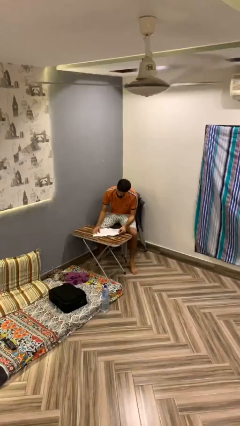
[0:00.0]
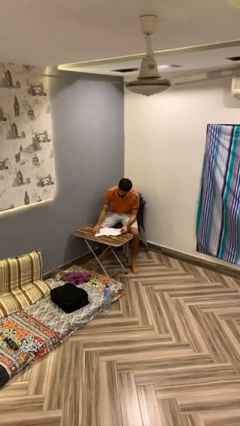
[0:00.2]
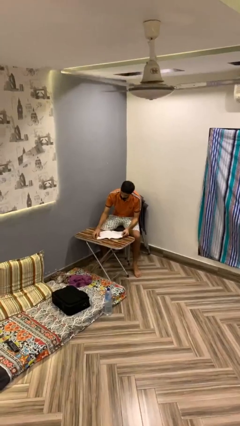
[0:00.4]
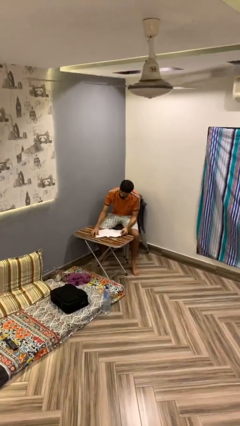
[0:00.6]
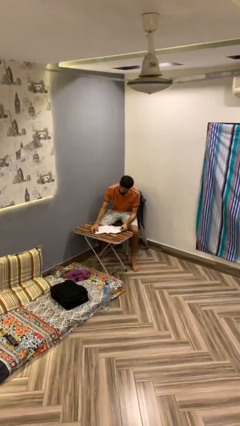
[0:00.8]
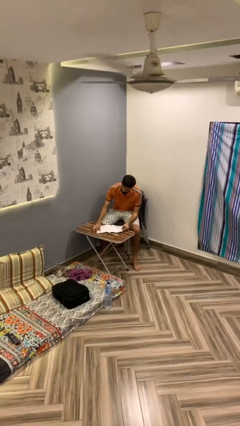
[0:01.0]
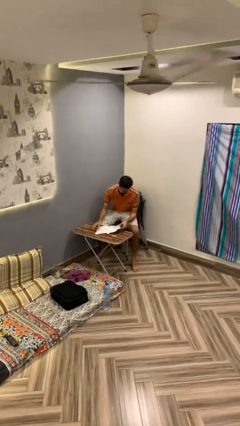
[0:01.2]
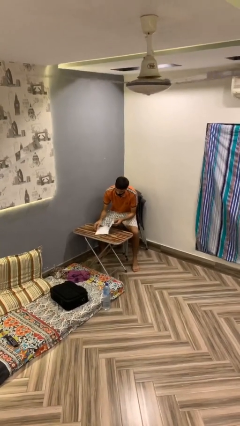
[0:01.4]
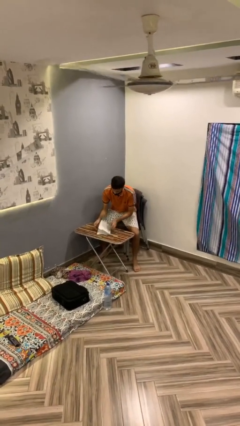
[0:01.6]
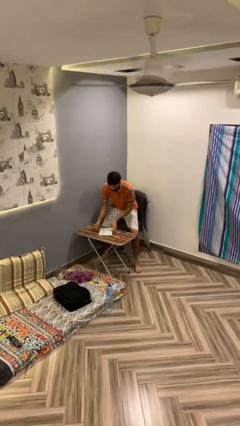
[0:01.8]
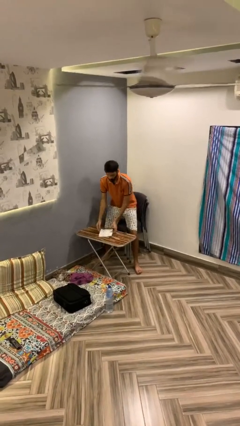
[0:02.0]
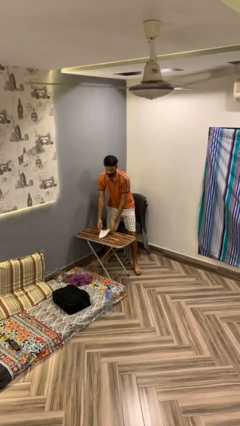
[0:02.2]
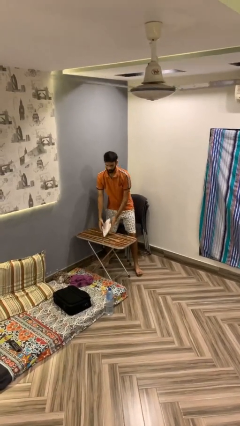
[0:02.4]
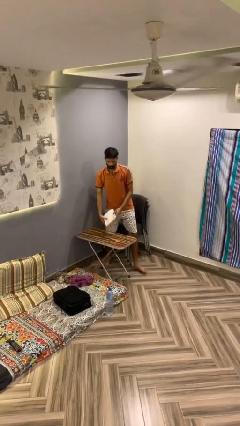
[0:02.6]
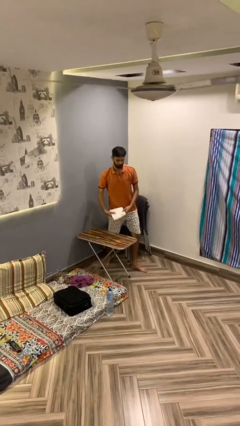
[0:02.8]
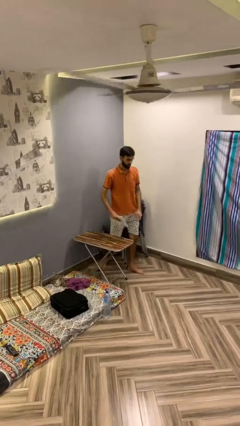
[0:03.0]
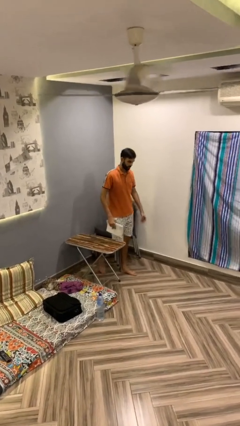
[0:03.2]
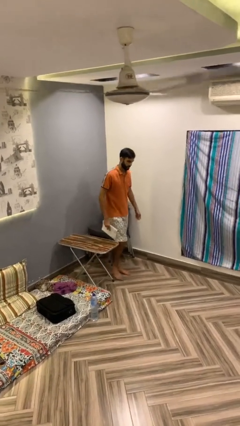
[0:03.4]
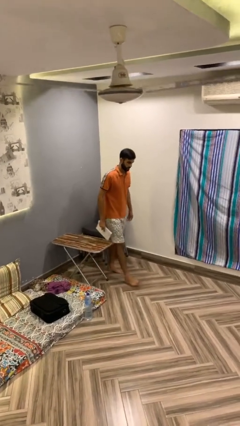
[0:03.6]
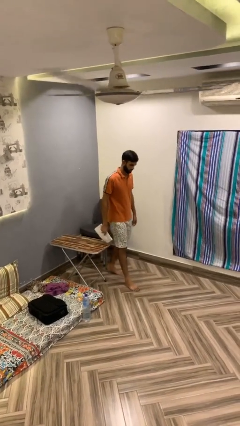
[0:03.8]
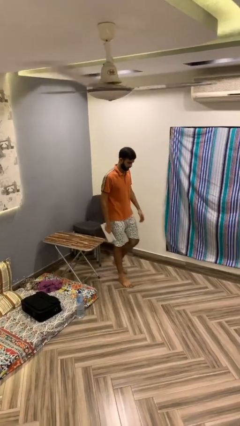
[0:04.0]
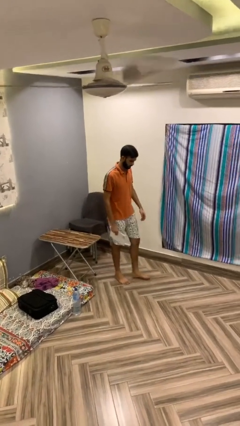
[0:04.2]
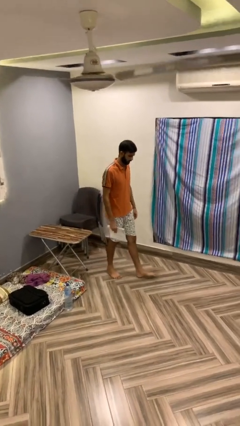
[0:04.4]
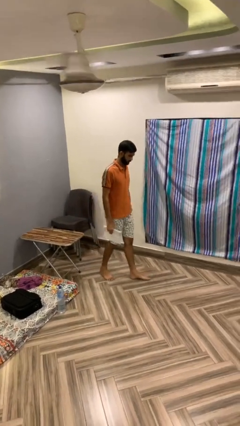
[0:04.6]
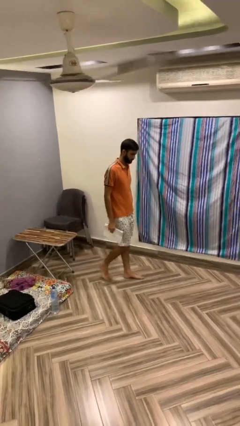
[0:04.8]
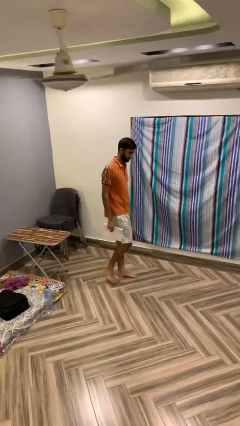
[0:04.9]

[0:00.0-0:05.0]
person stands up

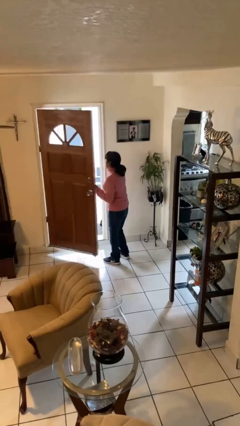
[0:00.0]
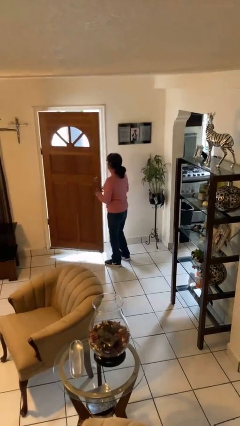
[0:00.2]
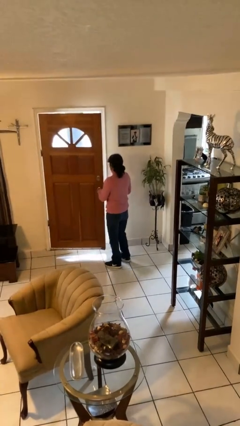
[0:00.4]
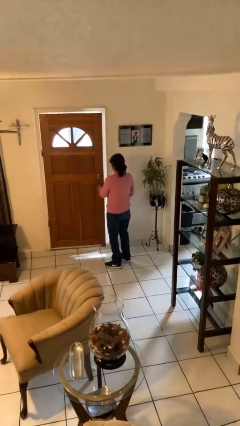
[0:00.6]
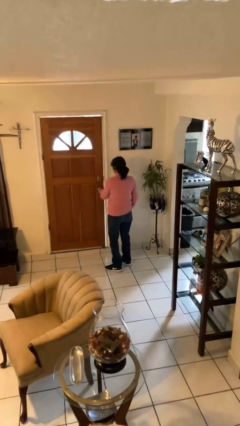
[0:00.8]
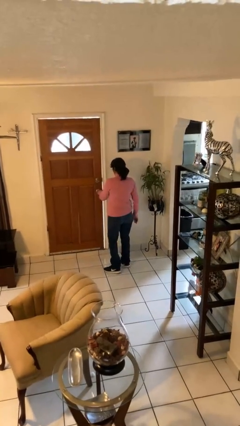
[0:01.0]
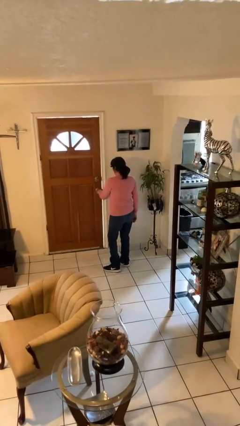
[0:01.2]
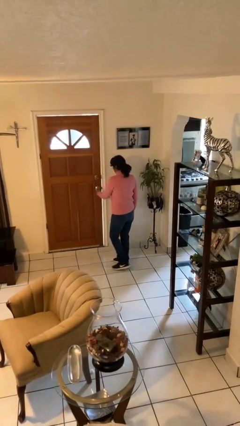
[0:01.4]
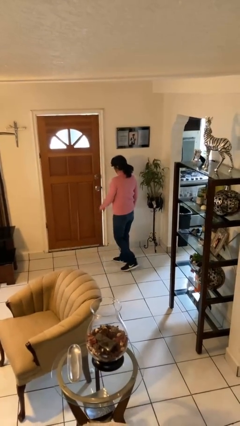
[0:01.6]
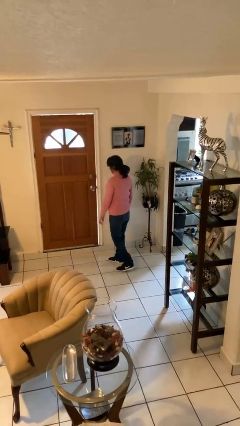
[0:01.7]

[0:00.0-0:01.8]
person closes facility door

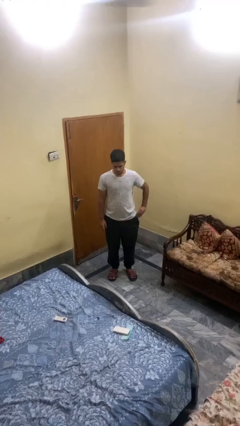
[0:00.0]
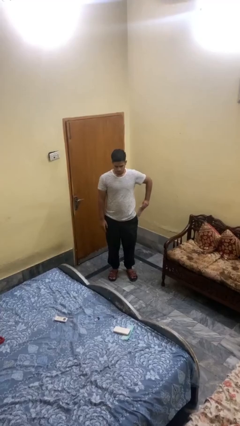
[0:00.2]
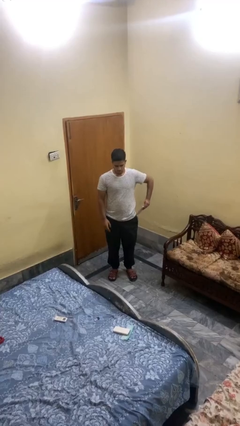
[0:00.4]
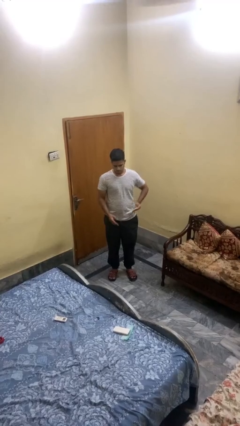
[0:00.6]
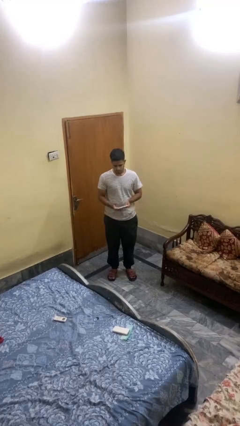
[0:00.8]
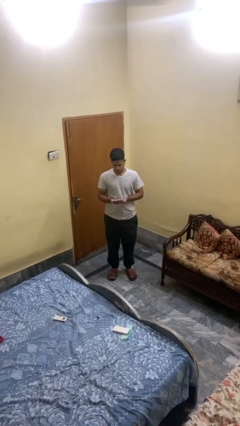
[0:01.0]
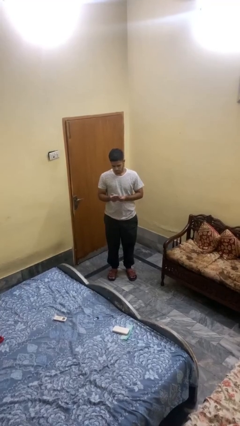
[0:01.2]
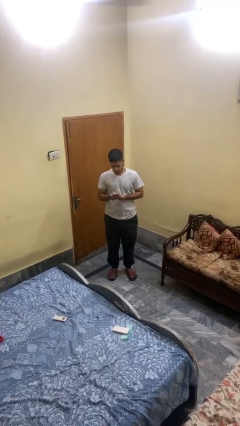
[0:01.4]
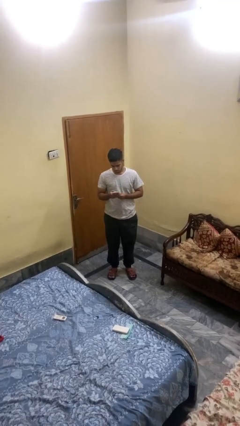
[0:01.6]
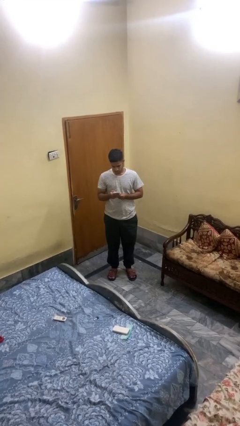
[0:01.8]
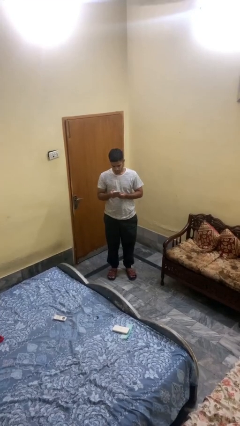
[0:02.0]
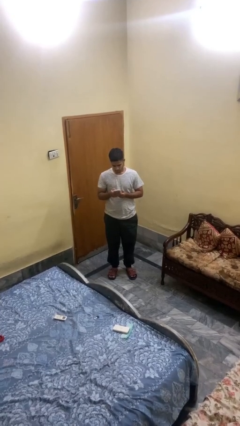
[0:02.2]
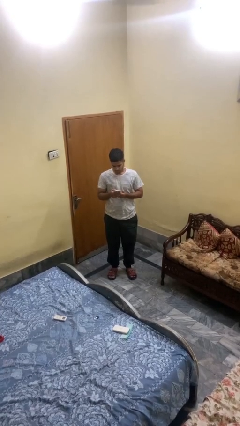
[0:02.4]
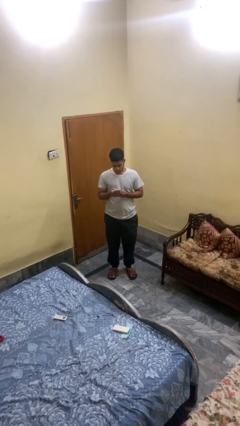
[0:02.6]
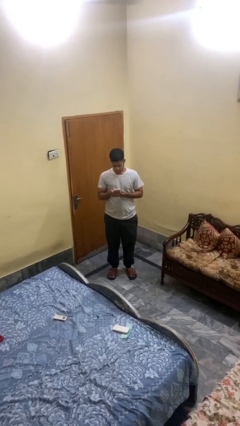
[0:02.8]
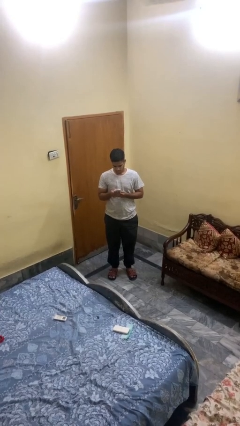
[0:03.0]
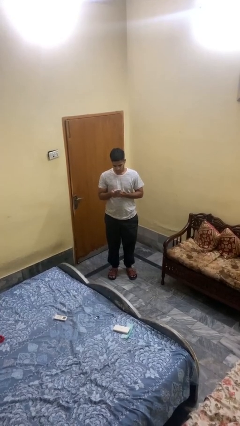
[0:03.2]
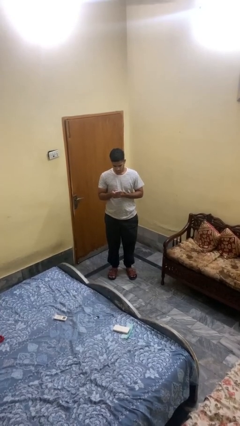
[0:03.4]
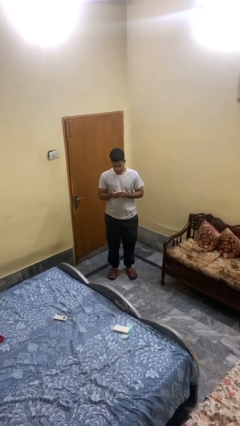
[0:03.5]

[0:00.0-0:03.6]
person takes phone from pocket

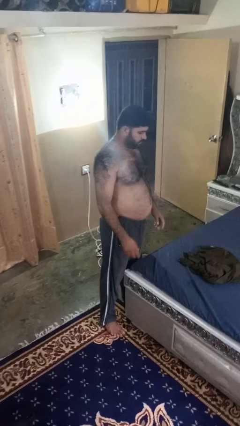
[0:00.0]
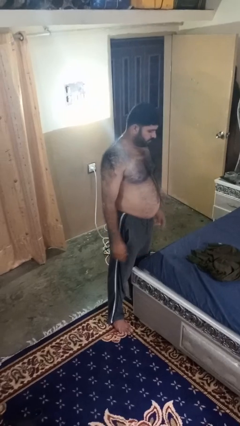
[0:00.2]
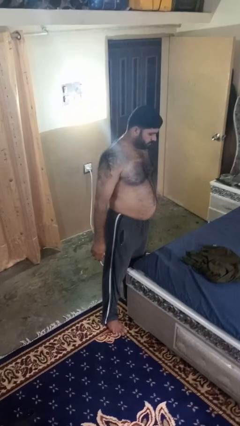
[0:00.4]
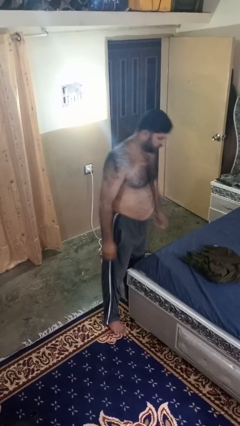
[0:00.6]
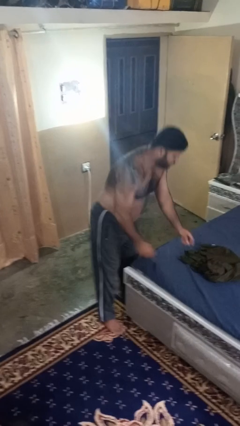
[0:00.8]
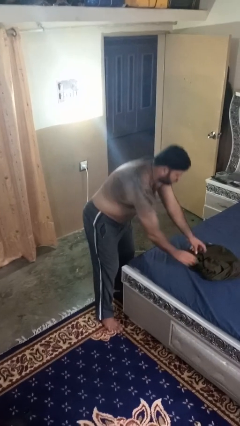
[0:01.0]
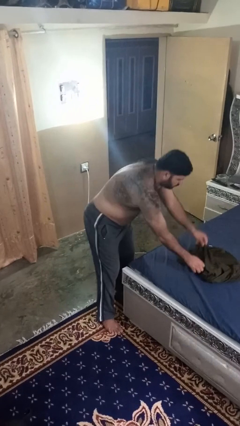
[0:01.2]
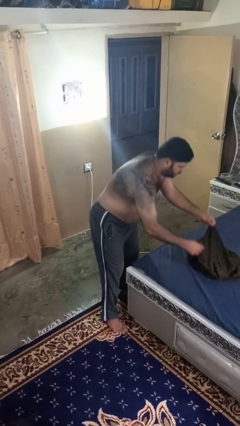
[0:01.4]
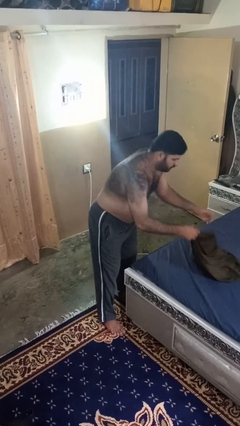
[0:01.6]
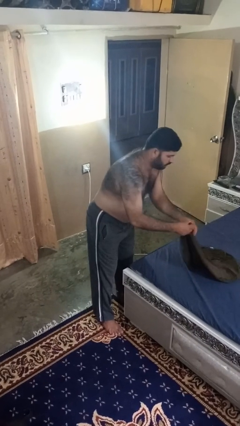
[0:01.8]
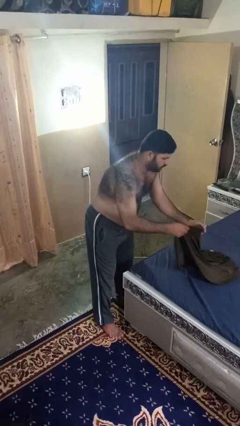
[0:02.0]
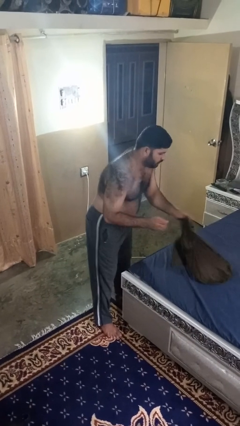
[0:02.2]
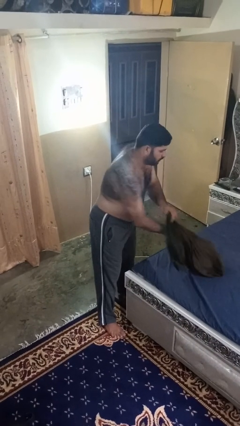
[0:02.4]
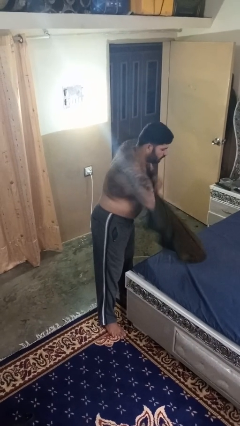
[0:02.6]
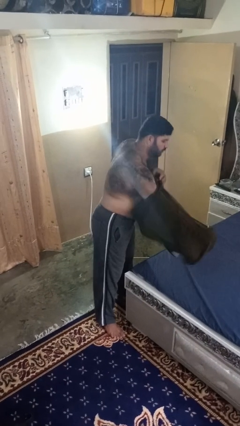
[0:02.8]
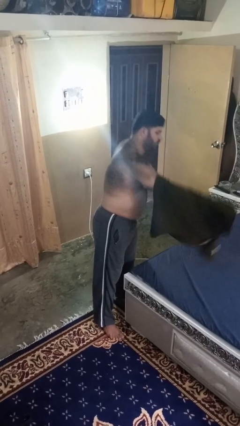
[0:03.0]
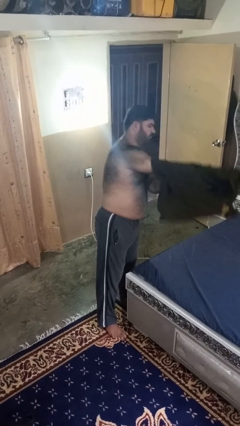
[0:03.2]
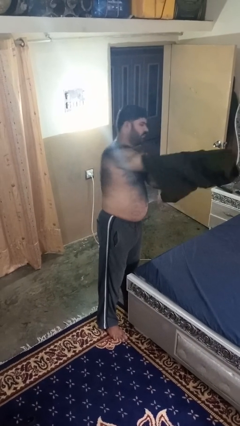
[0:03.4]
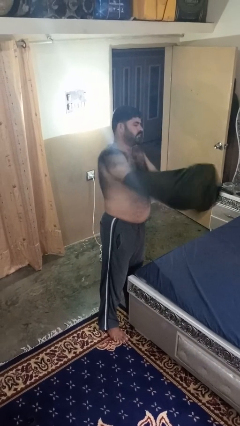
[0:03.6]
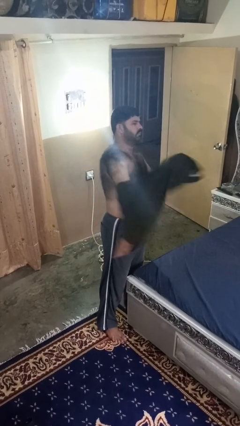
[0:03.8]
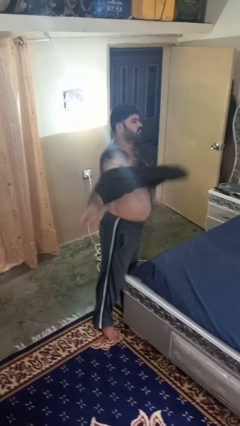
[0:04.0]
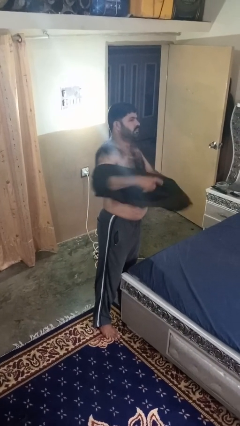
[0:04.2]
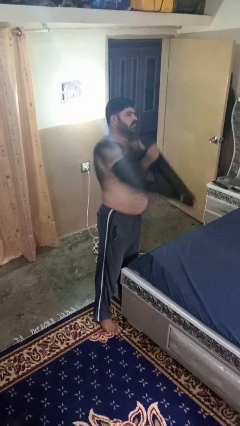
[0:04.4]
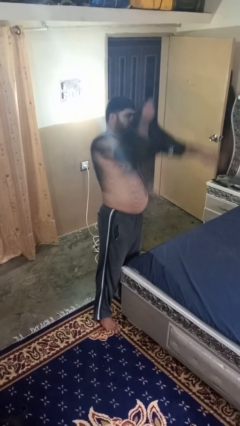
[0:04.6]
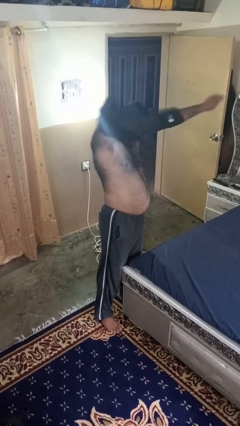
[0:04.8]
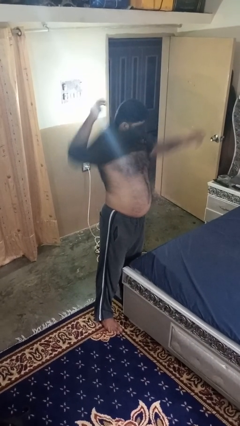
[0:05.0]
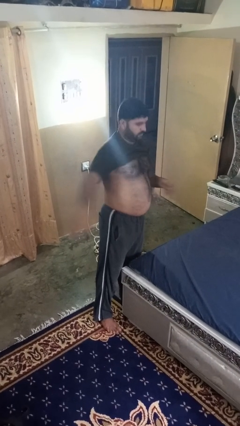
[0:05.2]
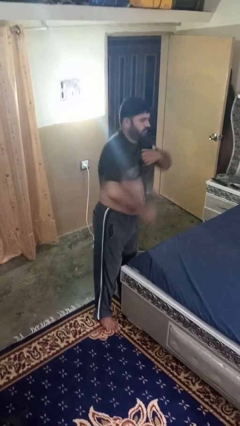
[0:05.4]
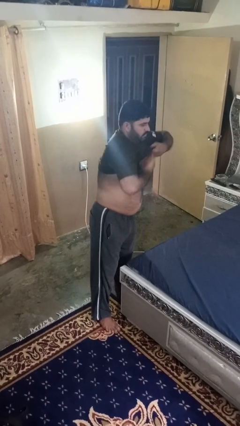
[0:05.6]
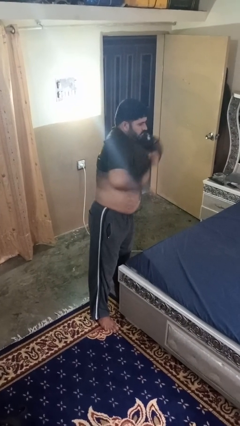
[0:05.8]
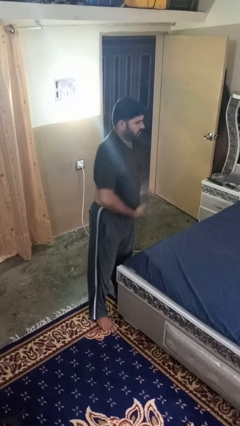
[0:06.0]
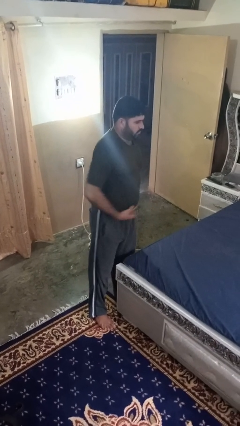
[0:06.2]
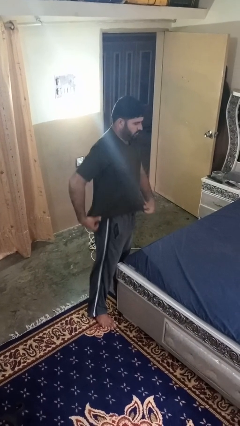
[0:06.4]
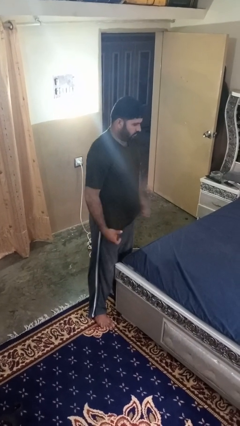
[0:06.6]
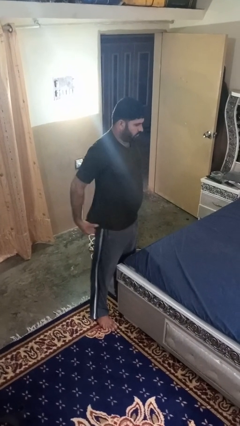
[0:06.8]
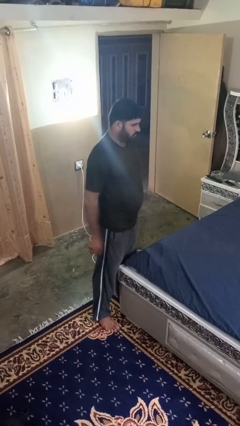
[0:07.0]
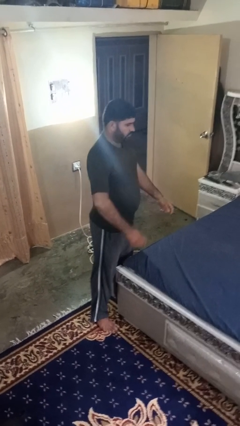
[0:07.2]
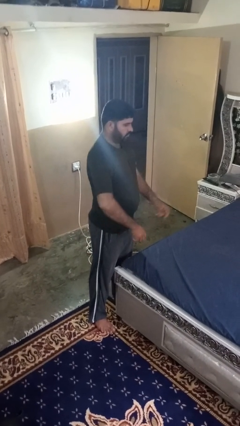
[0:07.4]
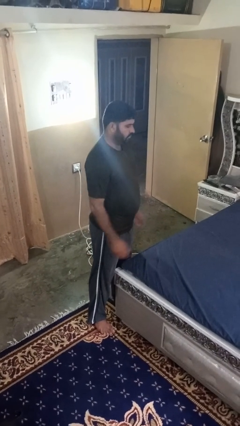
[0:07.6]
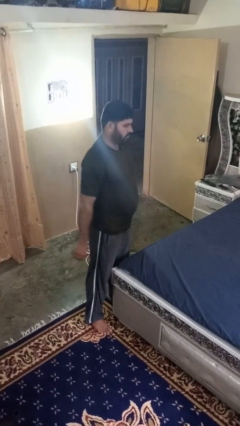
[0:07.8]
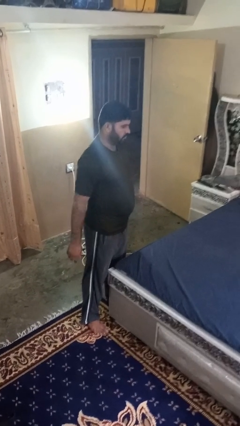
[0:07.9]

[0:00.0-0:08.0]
person puts on shirt
